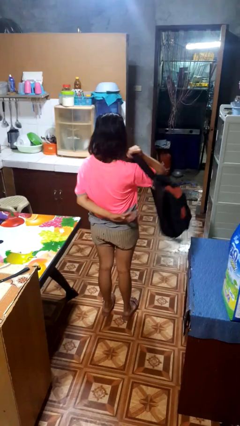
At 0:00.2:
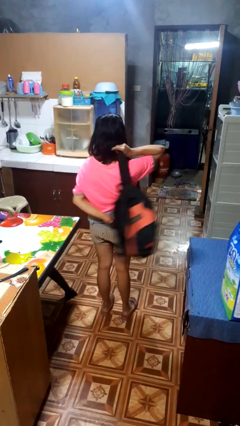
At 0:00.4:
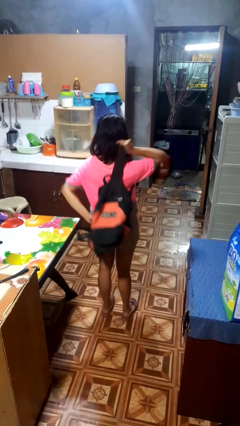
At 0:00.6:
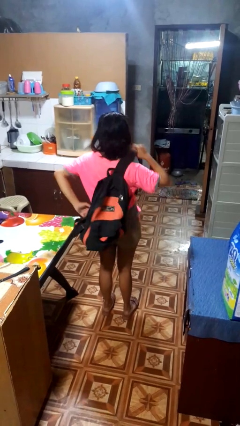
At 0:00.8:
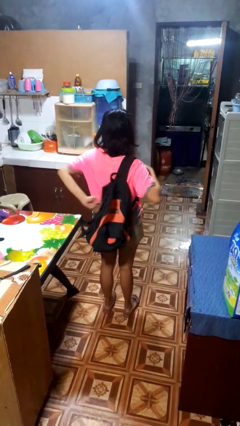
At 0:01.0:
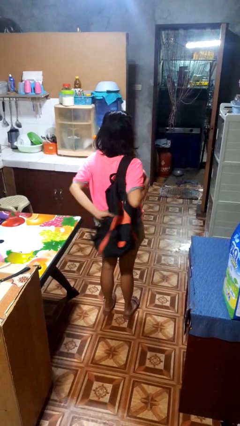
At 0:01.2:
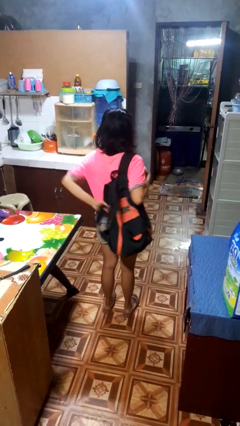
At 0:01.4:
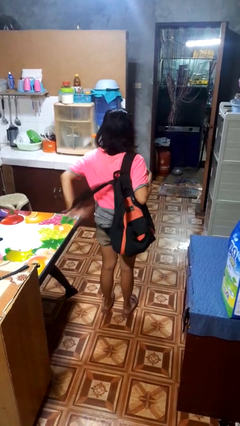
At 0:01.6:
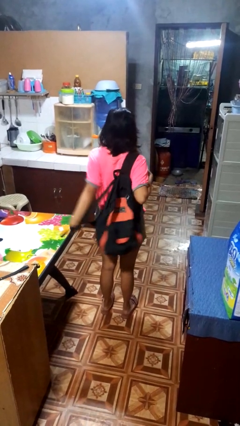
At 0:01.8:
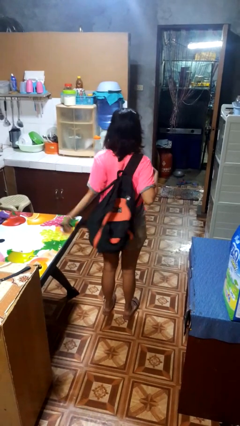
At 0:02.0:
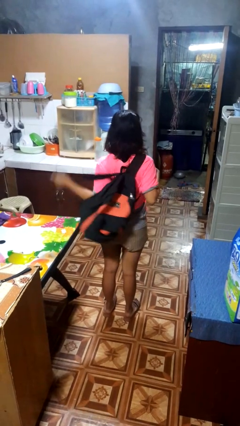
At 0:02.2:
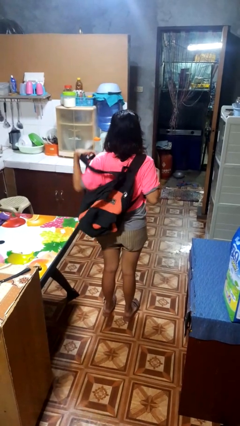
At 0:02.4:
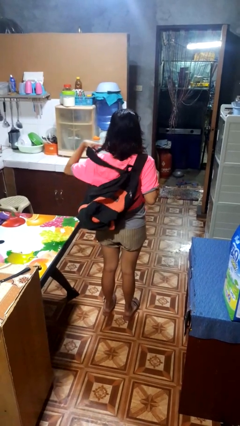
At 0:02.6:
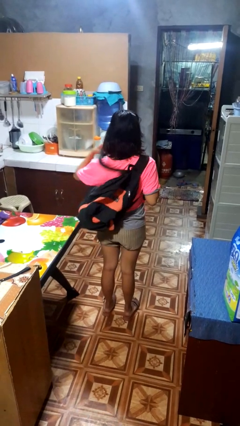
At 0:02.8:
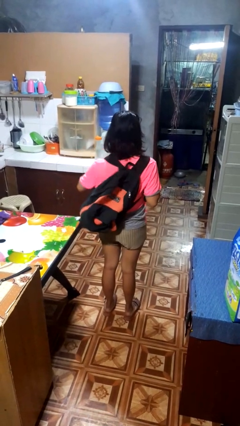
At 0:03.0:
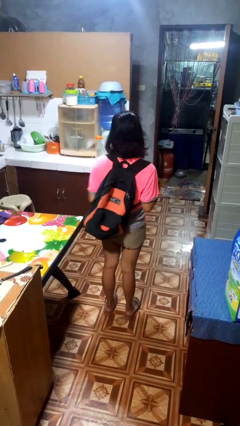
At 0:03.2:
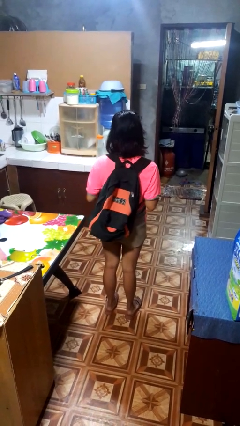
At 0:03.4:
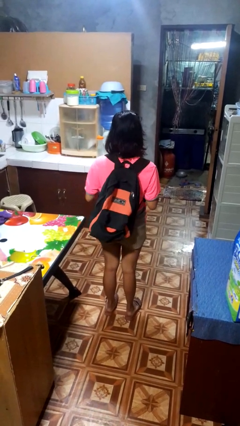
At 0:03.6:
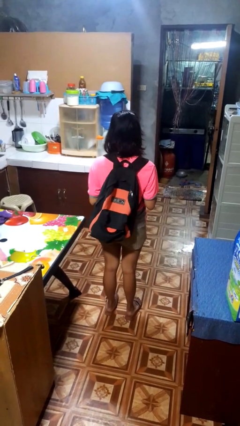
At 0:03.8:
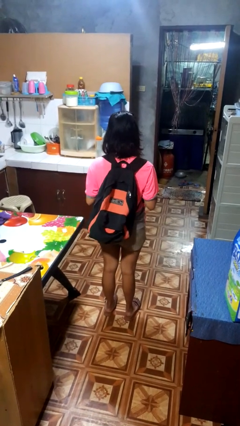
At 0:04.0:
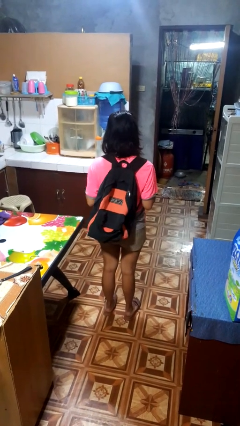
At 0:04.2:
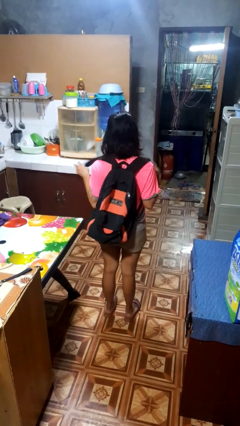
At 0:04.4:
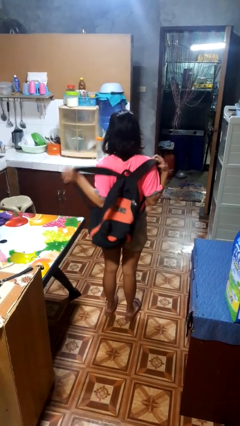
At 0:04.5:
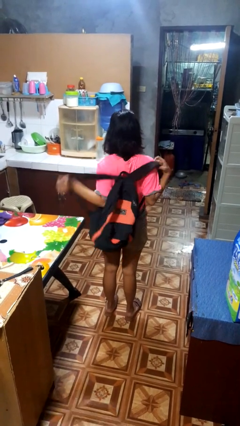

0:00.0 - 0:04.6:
person puts on backpack

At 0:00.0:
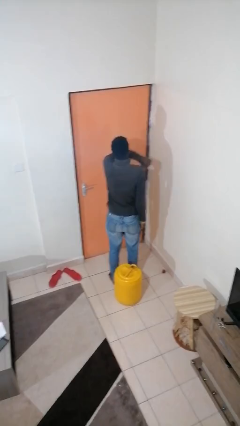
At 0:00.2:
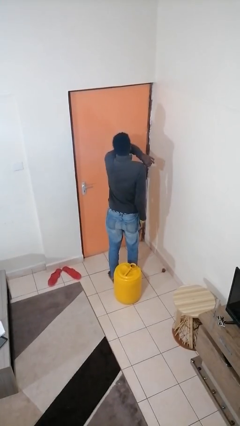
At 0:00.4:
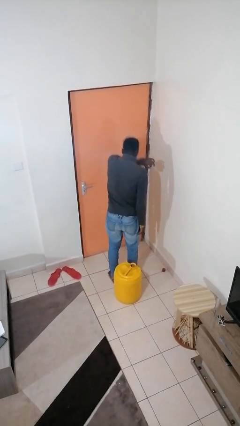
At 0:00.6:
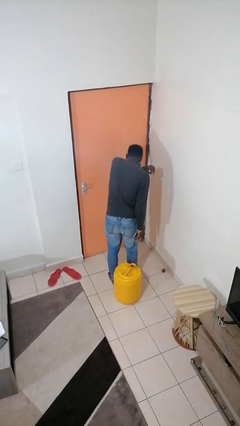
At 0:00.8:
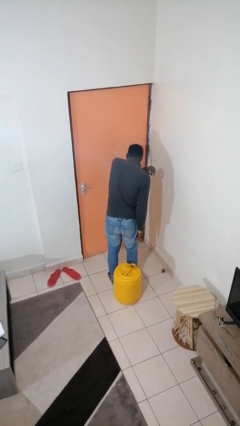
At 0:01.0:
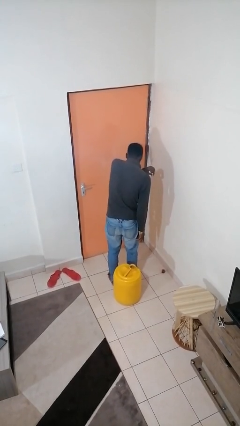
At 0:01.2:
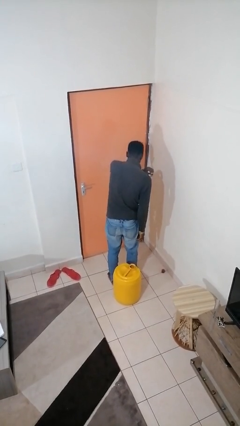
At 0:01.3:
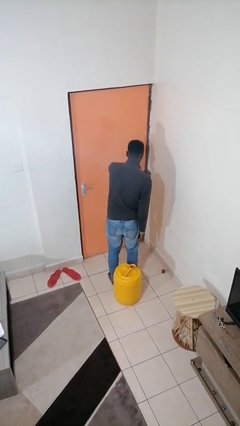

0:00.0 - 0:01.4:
person sneezes into arm

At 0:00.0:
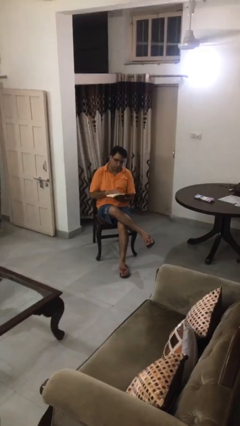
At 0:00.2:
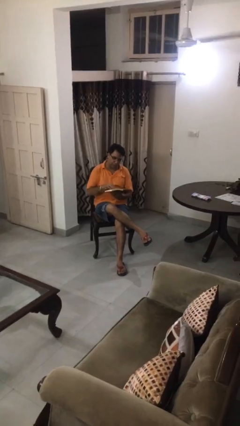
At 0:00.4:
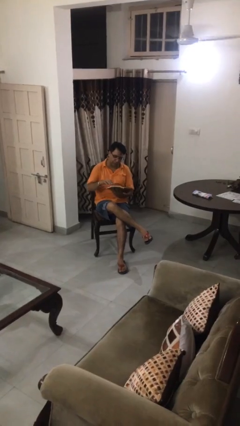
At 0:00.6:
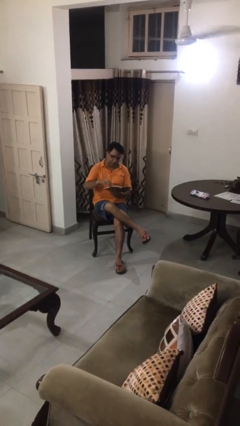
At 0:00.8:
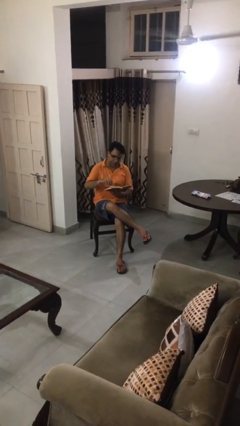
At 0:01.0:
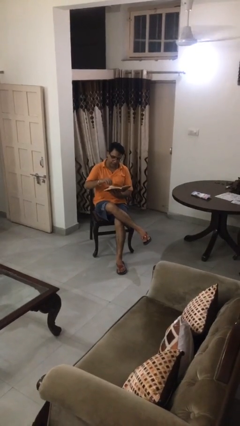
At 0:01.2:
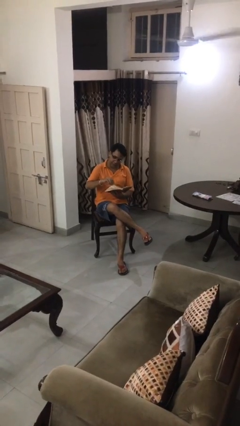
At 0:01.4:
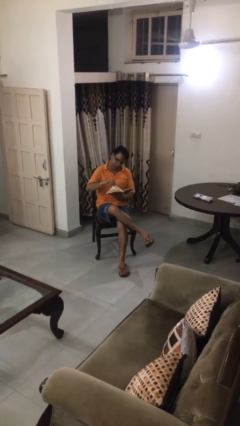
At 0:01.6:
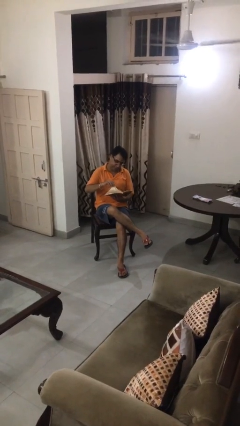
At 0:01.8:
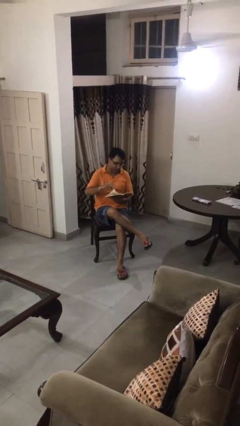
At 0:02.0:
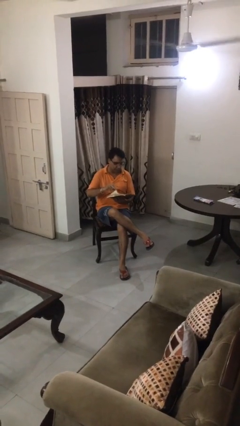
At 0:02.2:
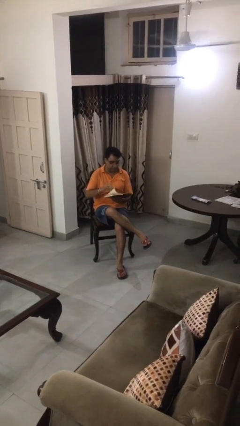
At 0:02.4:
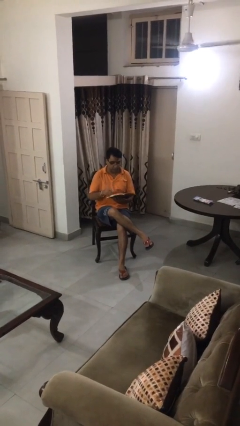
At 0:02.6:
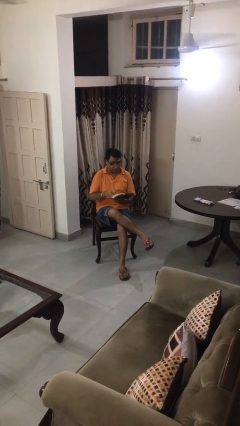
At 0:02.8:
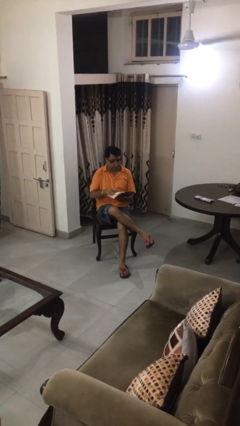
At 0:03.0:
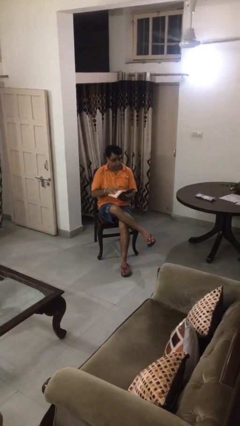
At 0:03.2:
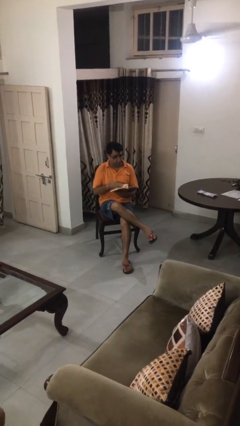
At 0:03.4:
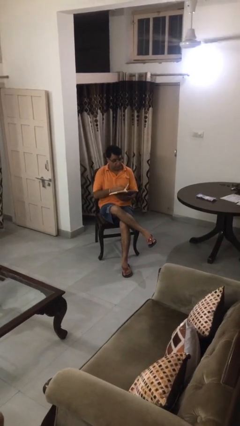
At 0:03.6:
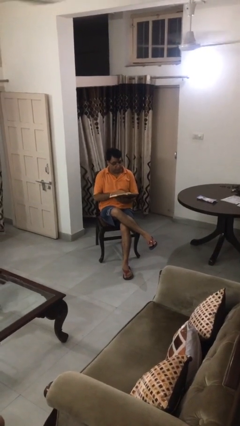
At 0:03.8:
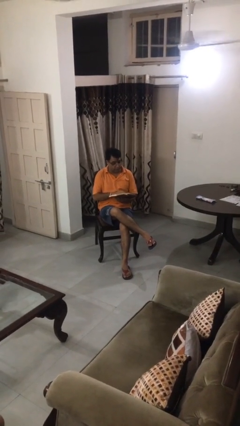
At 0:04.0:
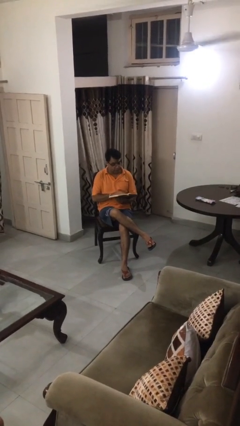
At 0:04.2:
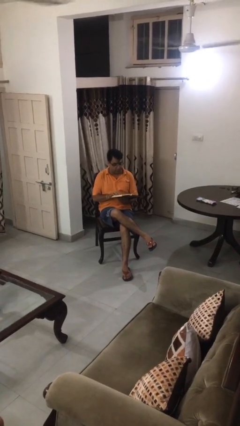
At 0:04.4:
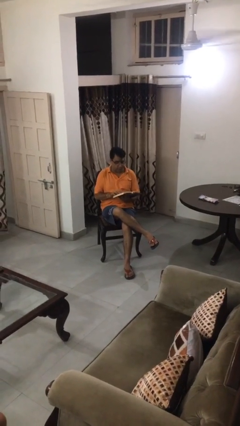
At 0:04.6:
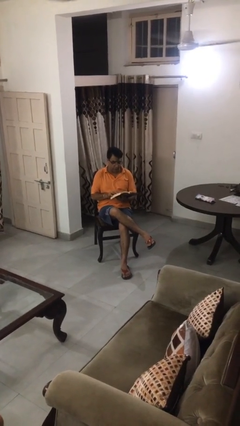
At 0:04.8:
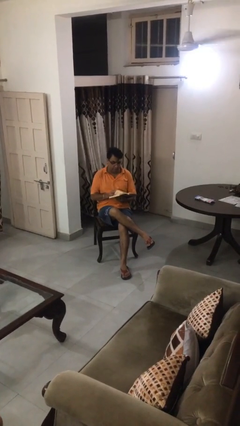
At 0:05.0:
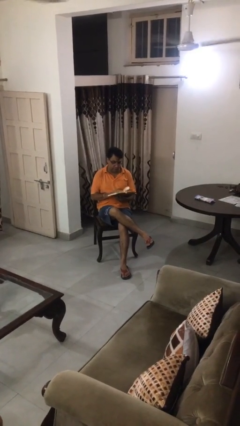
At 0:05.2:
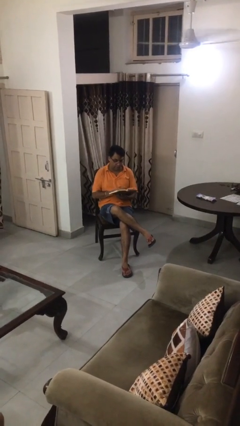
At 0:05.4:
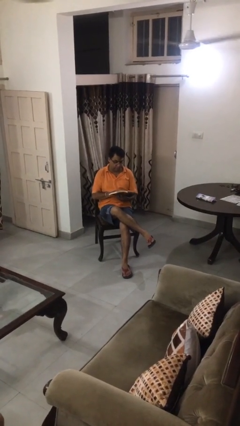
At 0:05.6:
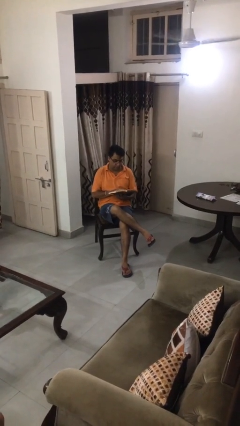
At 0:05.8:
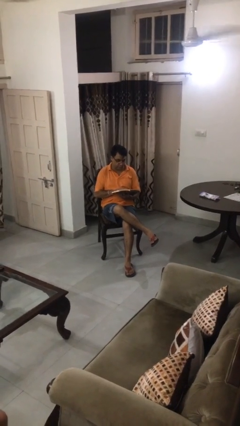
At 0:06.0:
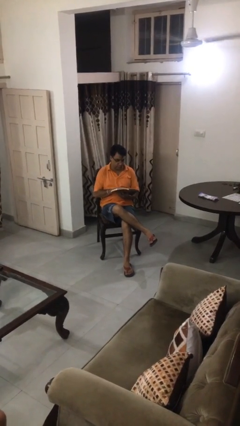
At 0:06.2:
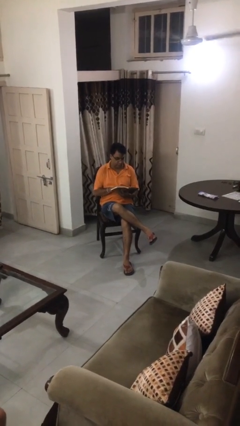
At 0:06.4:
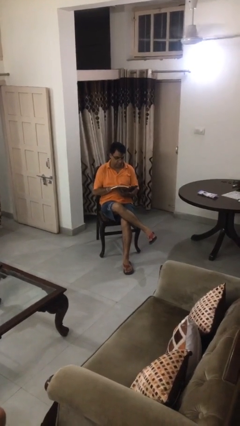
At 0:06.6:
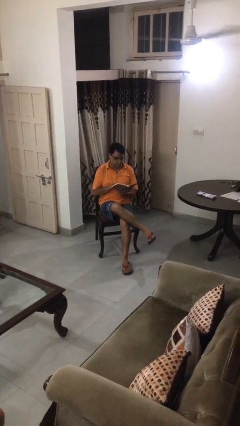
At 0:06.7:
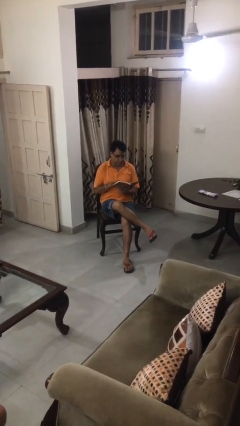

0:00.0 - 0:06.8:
person reads book

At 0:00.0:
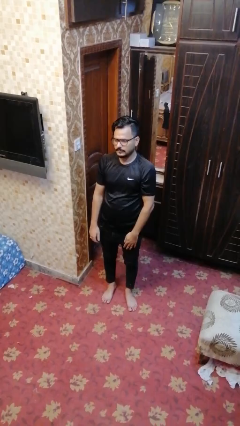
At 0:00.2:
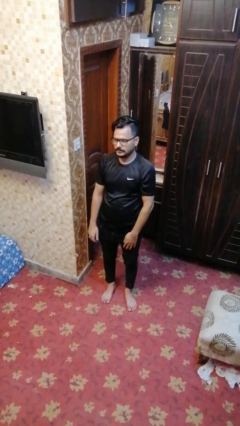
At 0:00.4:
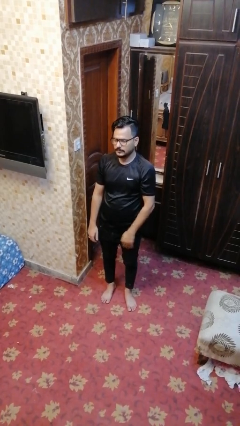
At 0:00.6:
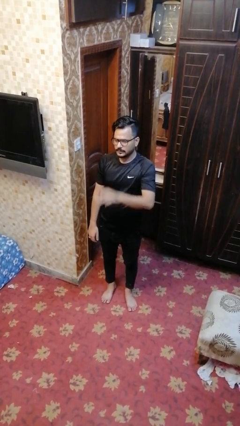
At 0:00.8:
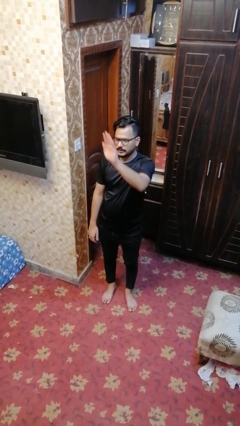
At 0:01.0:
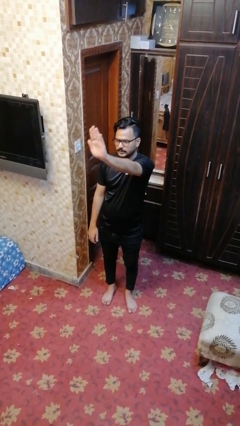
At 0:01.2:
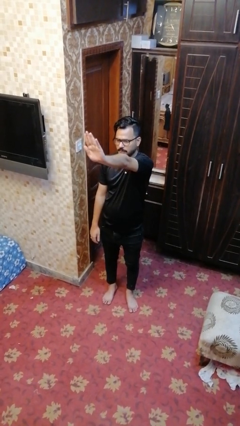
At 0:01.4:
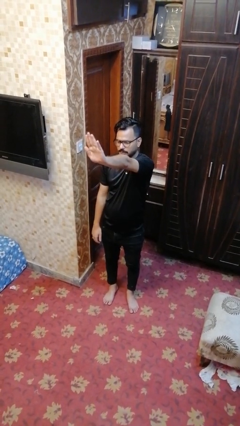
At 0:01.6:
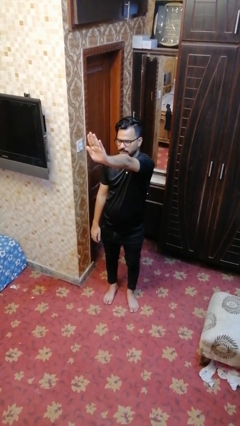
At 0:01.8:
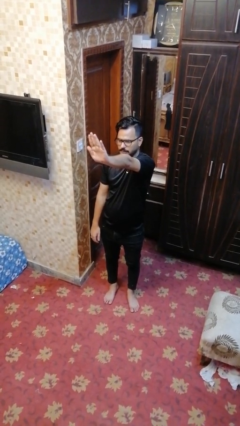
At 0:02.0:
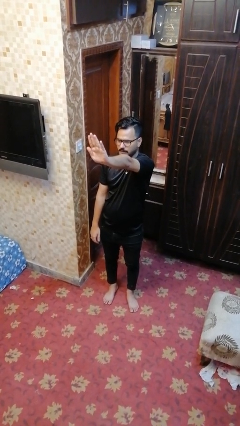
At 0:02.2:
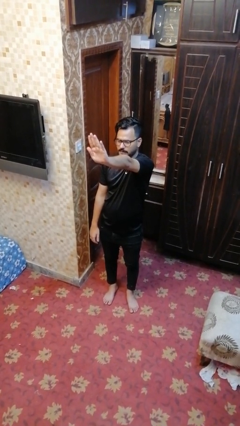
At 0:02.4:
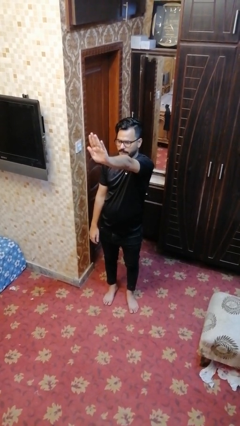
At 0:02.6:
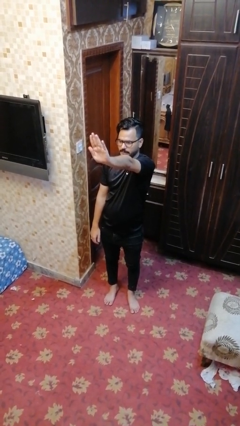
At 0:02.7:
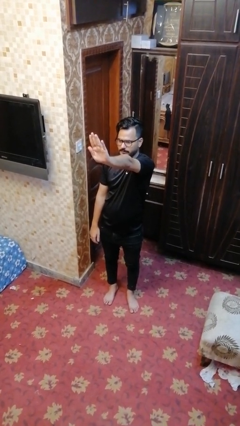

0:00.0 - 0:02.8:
person gestures stop

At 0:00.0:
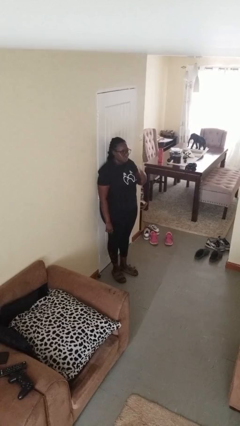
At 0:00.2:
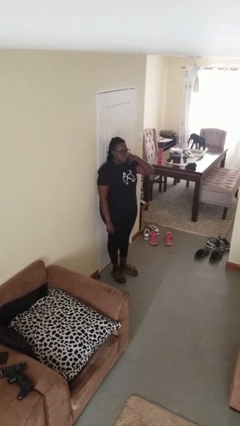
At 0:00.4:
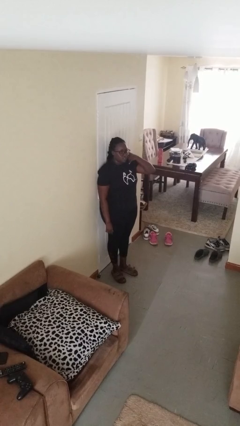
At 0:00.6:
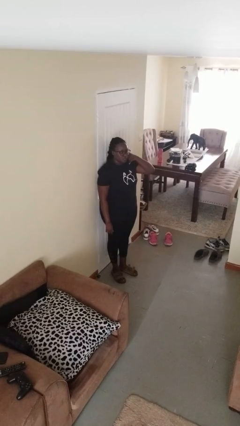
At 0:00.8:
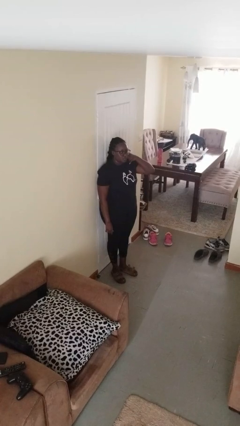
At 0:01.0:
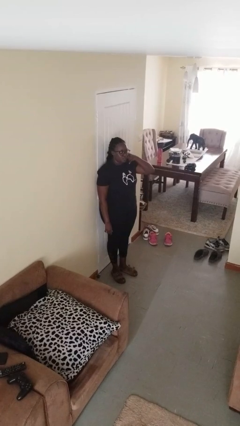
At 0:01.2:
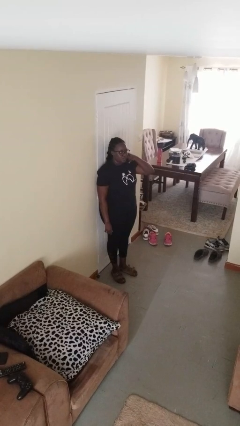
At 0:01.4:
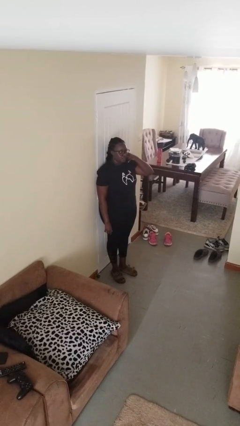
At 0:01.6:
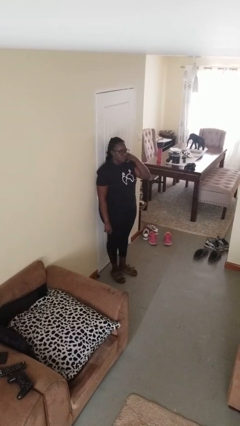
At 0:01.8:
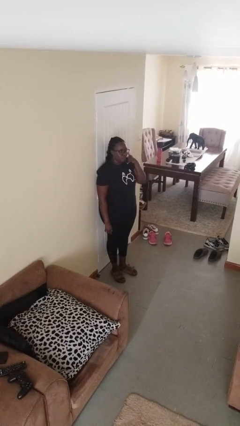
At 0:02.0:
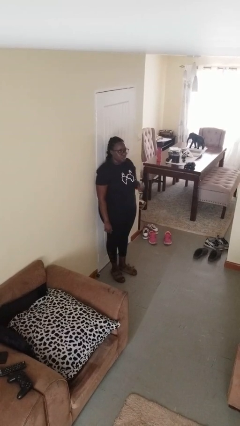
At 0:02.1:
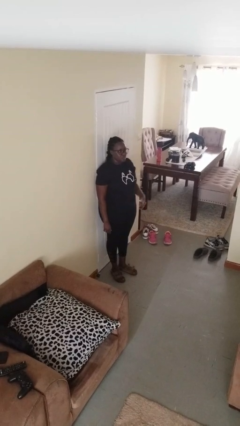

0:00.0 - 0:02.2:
person gestures call me
